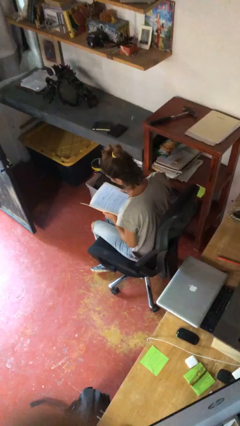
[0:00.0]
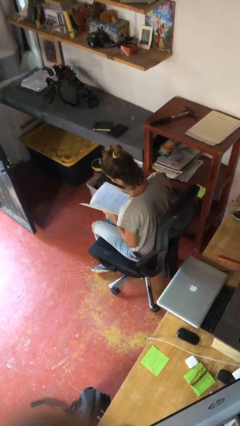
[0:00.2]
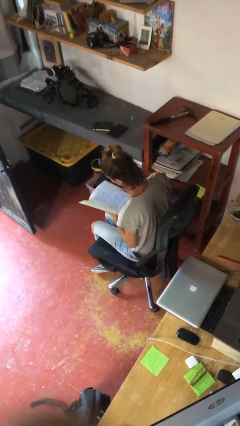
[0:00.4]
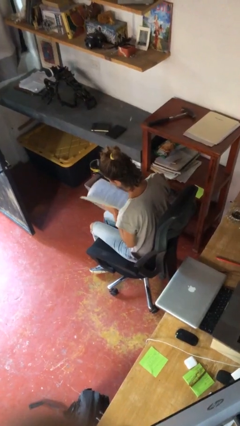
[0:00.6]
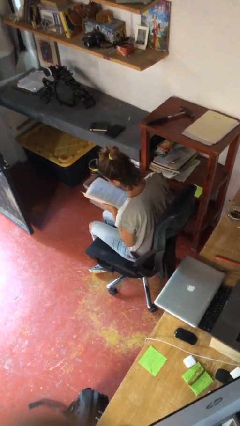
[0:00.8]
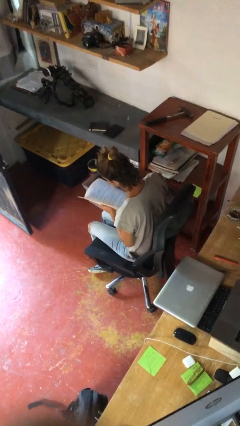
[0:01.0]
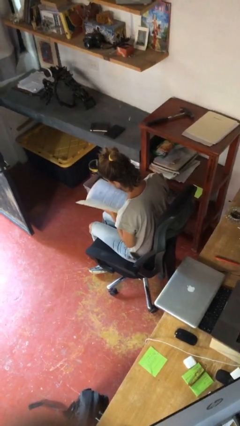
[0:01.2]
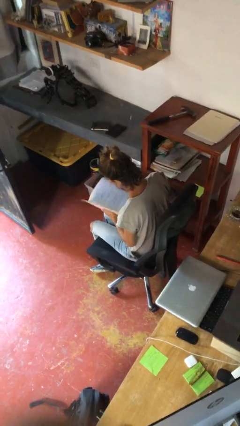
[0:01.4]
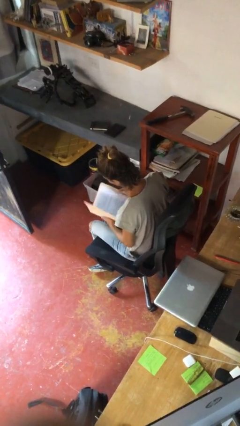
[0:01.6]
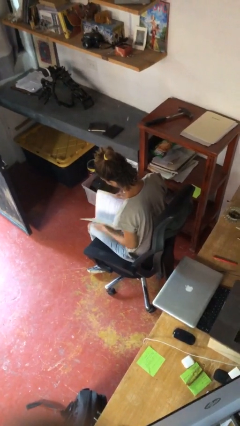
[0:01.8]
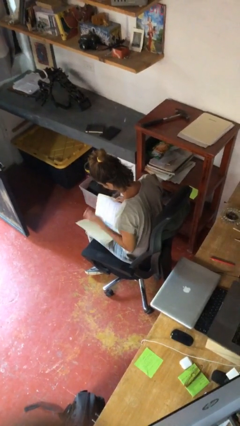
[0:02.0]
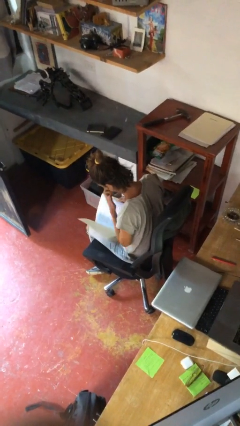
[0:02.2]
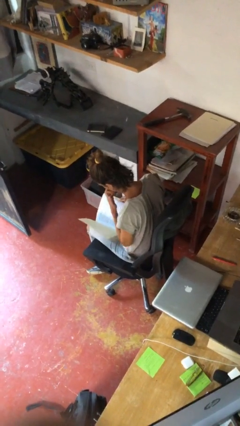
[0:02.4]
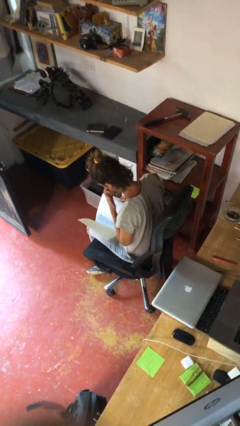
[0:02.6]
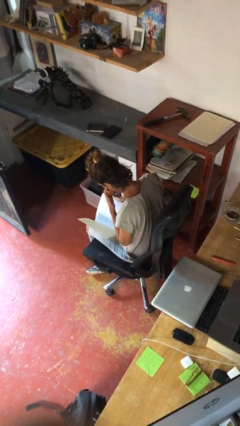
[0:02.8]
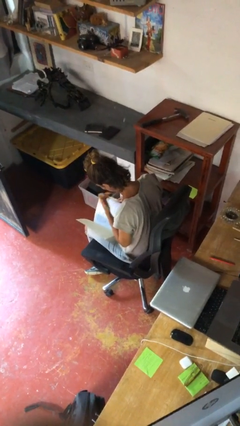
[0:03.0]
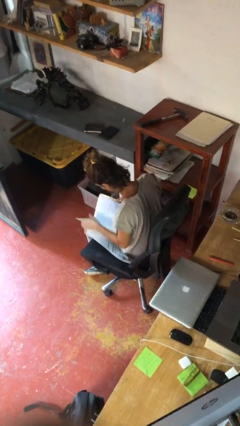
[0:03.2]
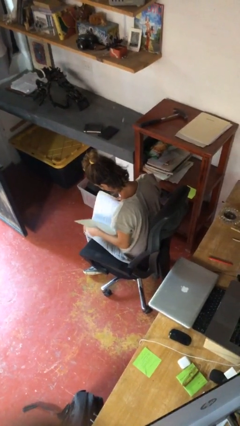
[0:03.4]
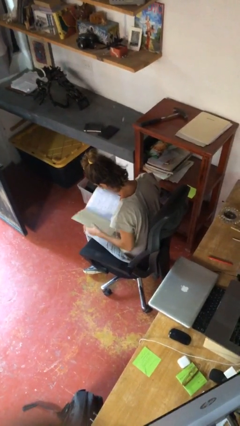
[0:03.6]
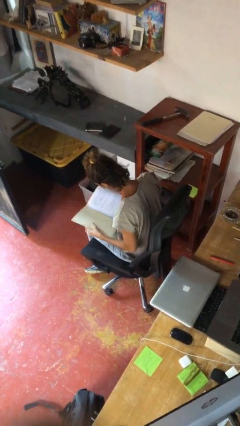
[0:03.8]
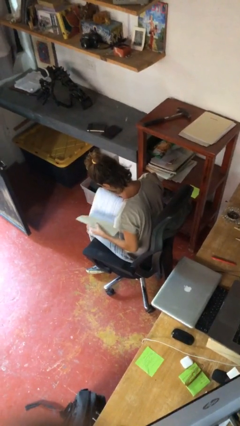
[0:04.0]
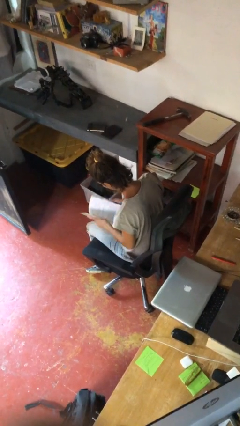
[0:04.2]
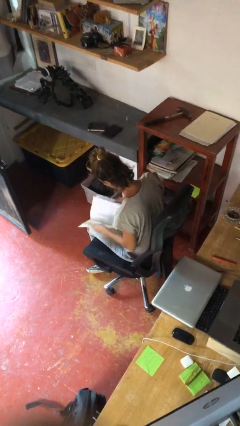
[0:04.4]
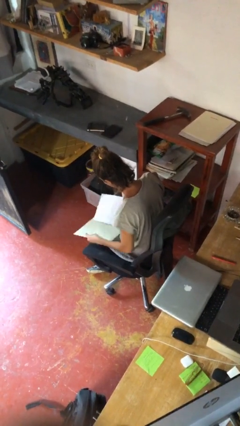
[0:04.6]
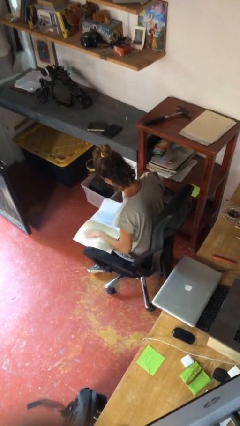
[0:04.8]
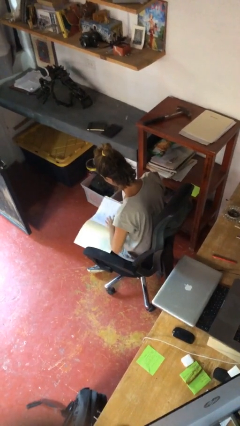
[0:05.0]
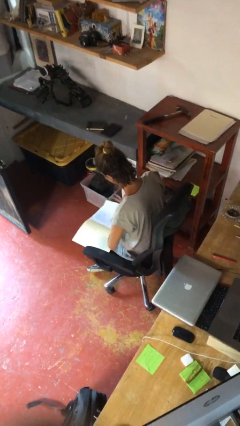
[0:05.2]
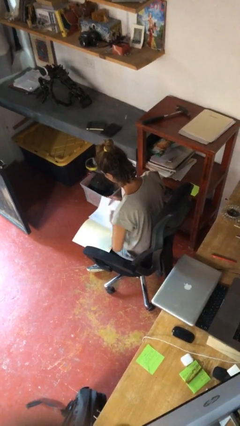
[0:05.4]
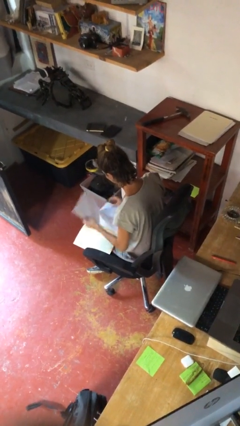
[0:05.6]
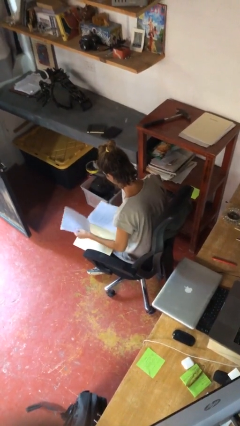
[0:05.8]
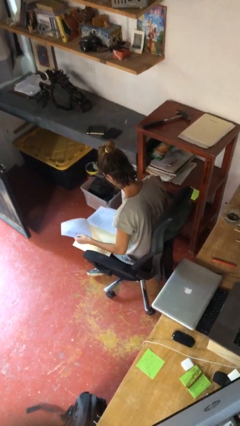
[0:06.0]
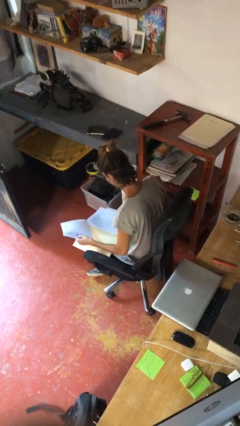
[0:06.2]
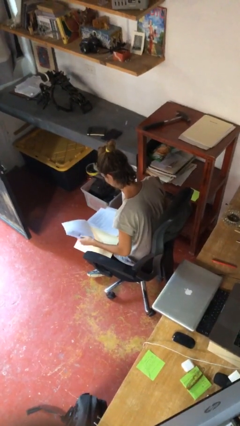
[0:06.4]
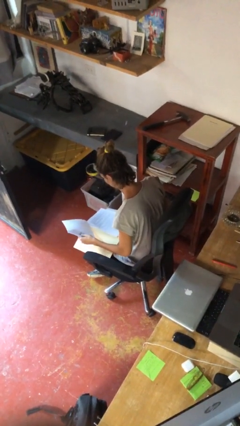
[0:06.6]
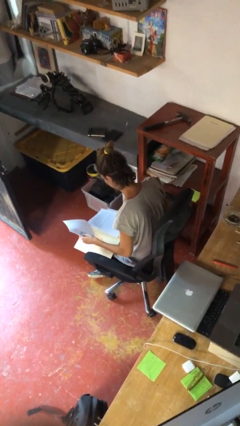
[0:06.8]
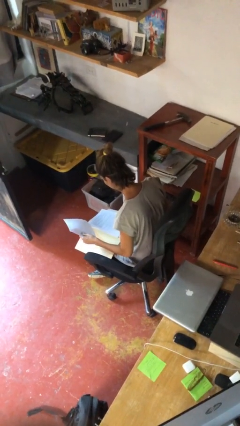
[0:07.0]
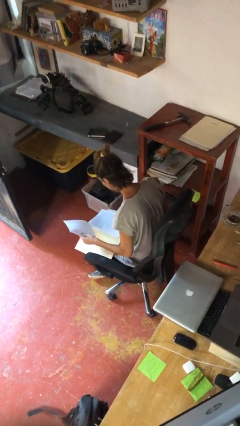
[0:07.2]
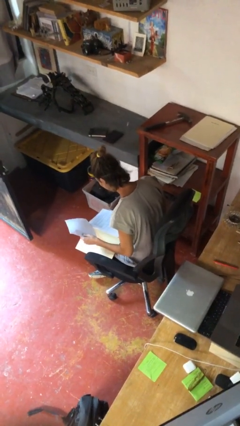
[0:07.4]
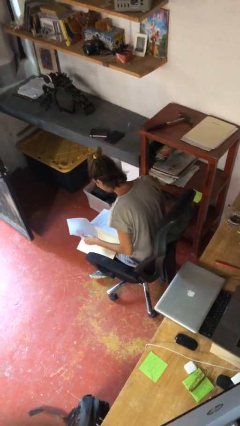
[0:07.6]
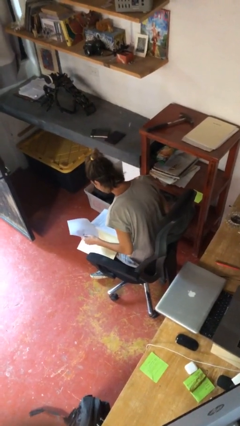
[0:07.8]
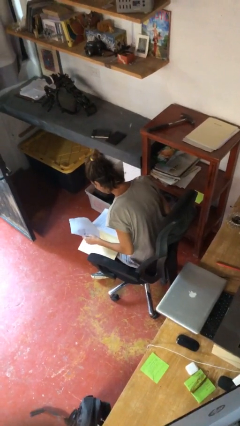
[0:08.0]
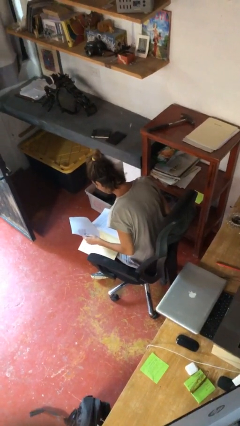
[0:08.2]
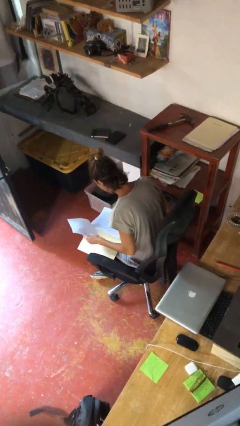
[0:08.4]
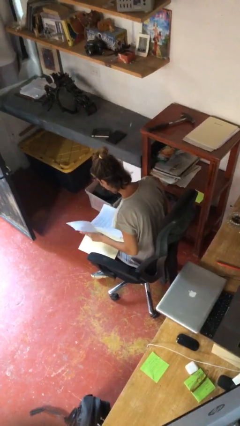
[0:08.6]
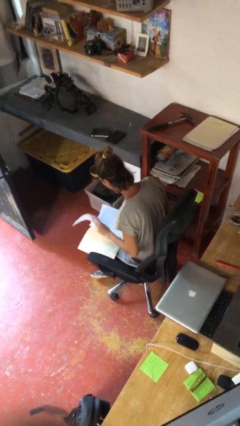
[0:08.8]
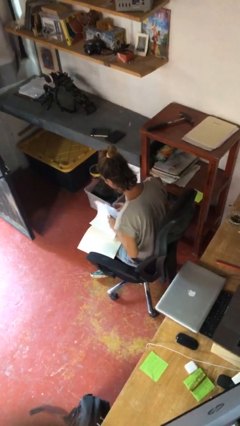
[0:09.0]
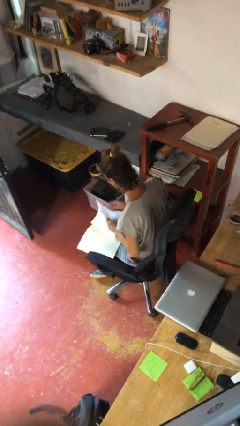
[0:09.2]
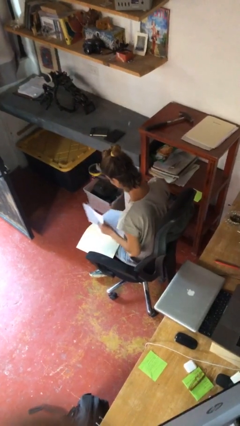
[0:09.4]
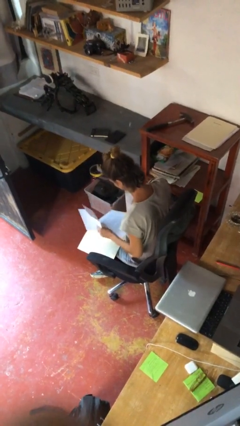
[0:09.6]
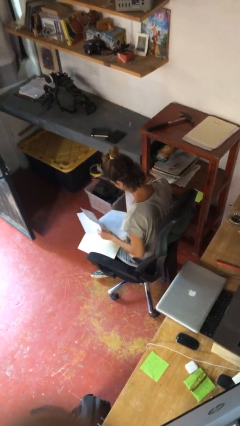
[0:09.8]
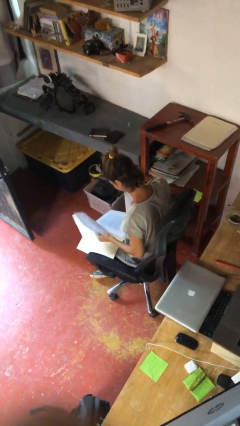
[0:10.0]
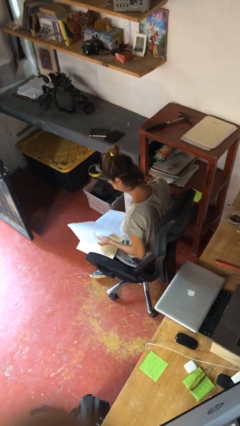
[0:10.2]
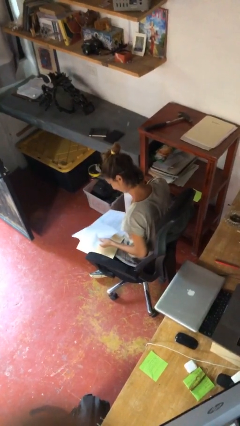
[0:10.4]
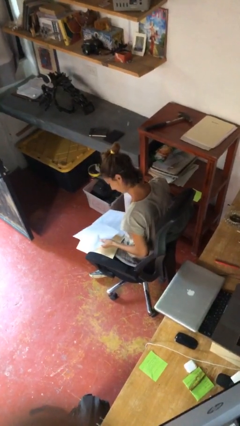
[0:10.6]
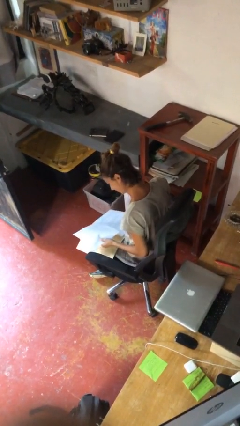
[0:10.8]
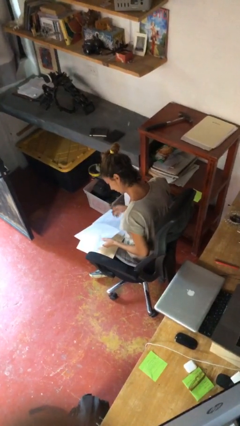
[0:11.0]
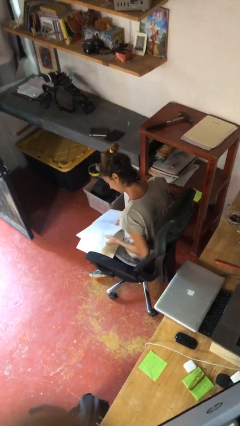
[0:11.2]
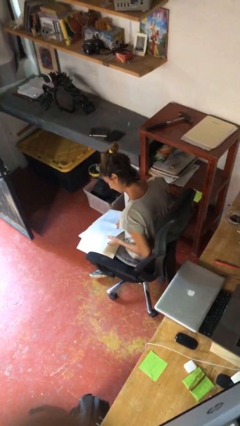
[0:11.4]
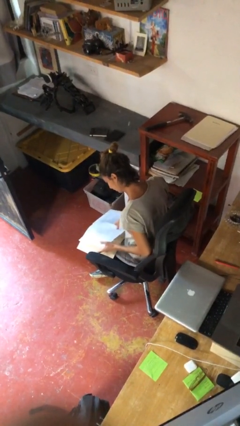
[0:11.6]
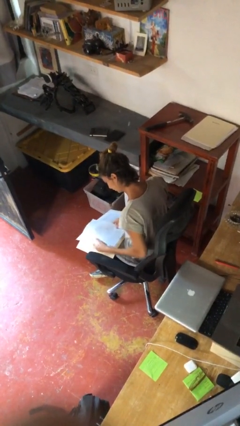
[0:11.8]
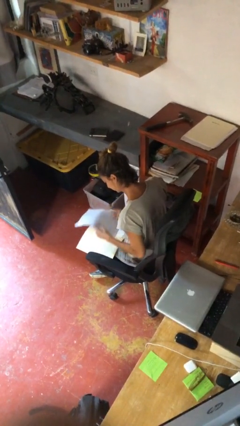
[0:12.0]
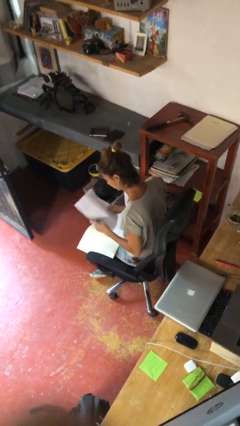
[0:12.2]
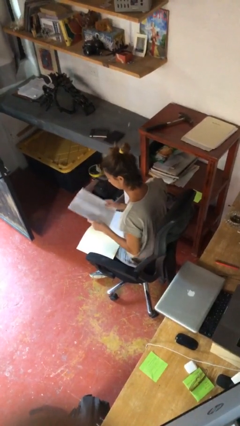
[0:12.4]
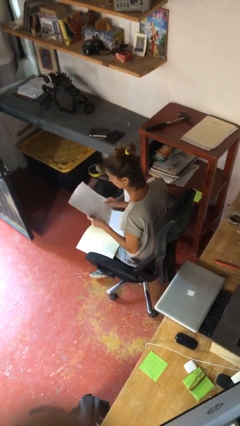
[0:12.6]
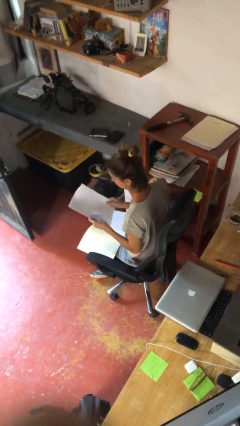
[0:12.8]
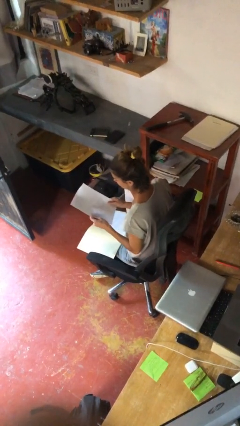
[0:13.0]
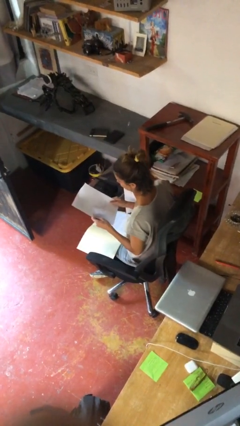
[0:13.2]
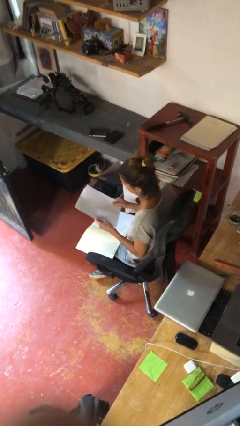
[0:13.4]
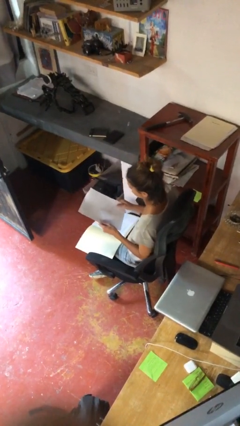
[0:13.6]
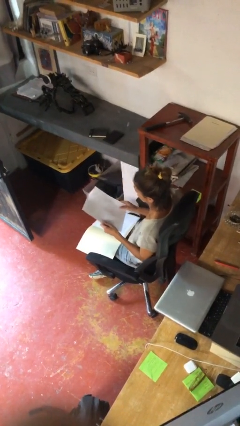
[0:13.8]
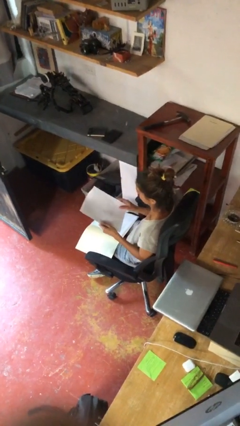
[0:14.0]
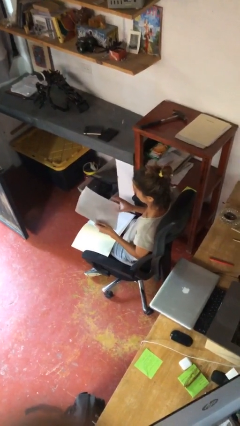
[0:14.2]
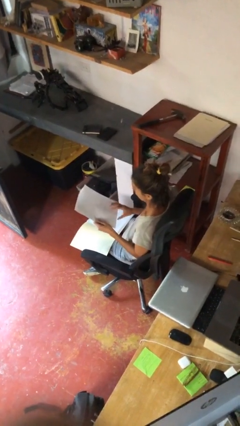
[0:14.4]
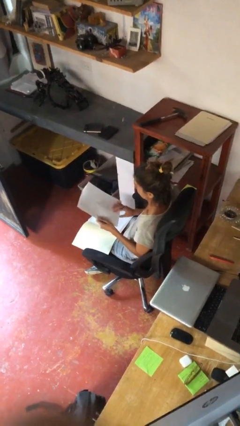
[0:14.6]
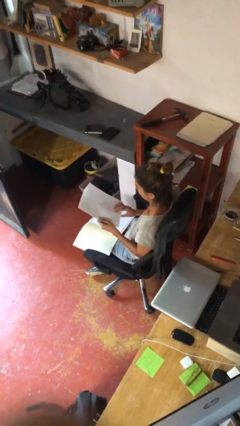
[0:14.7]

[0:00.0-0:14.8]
person reads document

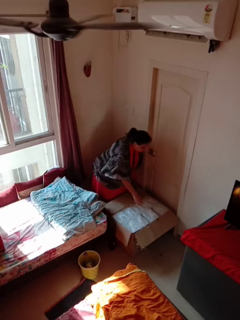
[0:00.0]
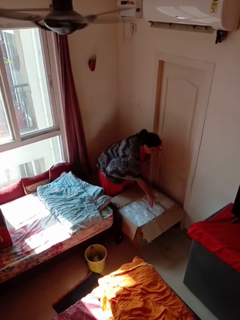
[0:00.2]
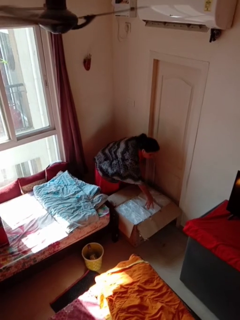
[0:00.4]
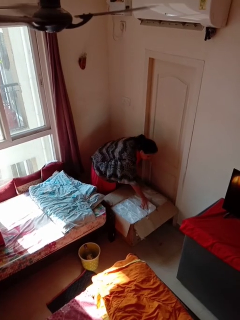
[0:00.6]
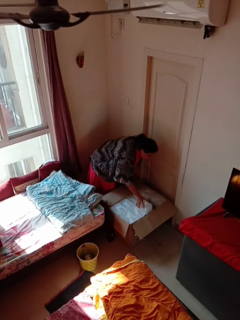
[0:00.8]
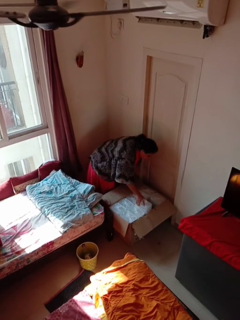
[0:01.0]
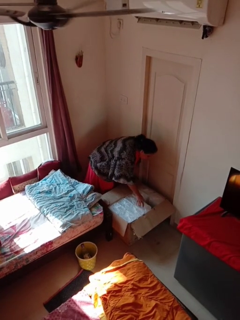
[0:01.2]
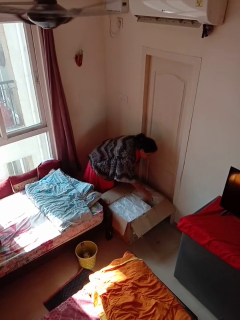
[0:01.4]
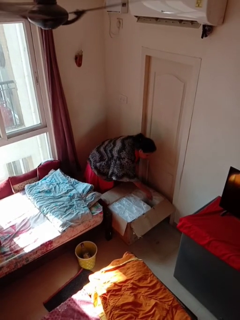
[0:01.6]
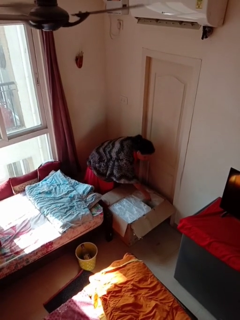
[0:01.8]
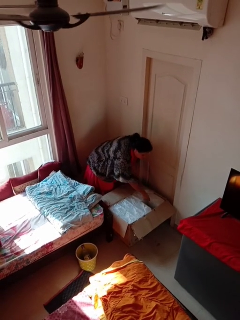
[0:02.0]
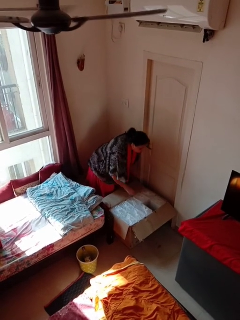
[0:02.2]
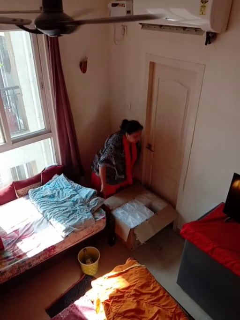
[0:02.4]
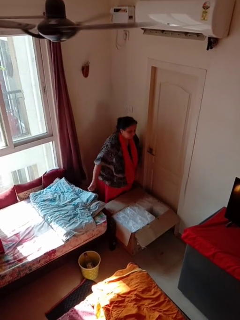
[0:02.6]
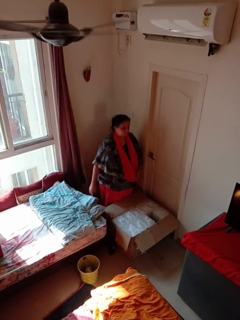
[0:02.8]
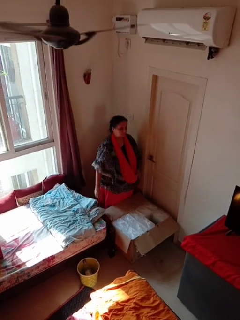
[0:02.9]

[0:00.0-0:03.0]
person searches in box

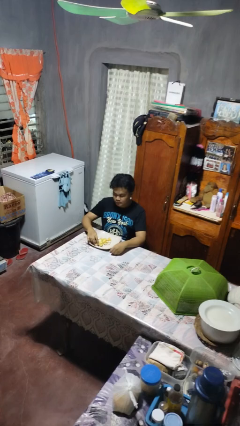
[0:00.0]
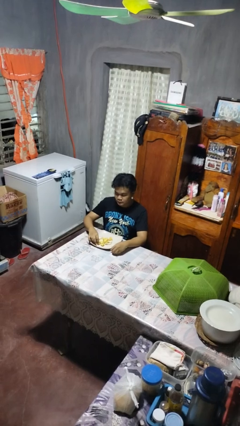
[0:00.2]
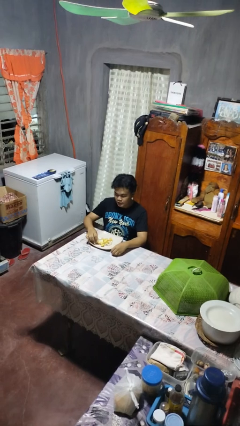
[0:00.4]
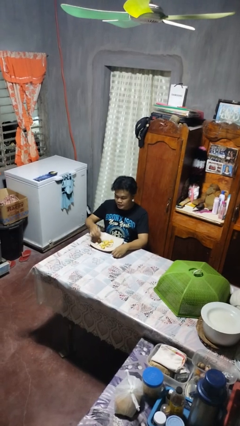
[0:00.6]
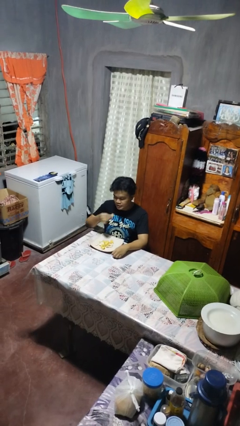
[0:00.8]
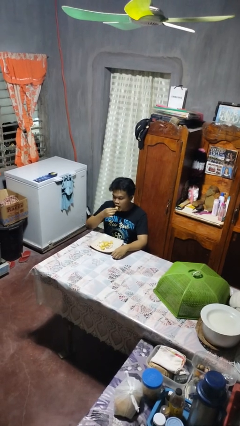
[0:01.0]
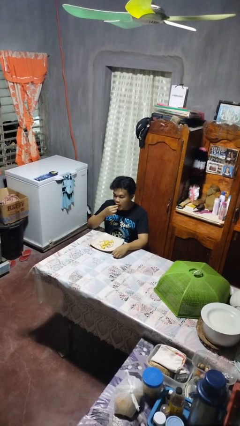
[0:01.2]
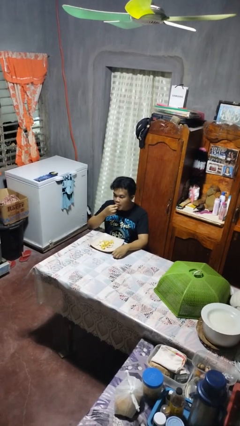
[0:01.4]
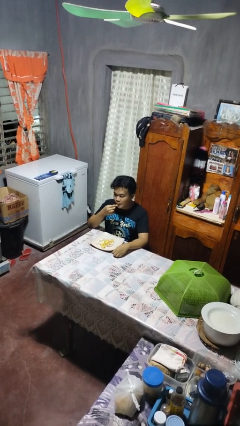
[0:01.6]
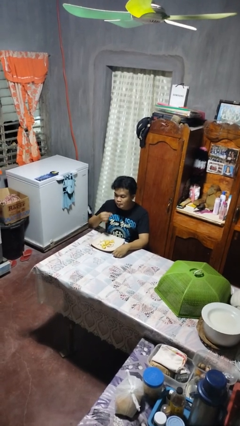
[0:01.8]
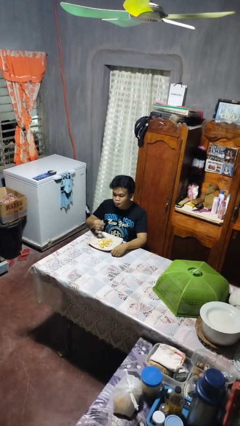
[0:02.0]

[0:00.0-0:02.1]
person eats with hands
